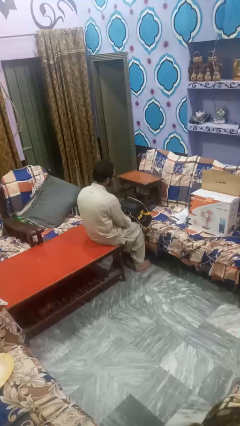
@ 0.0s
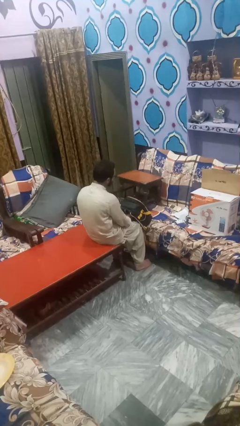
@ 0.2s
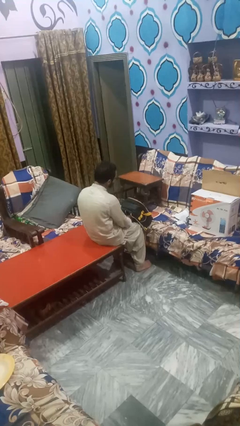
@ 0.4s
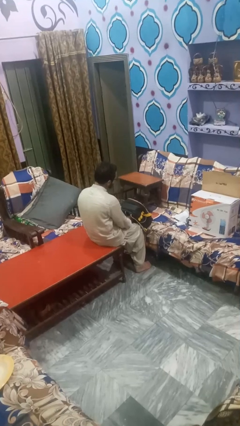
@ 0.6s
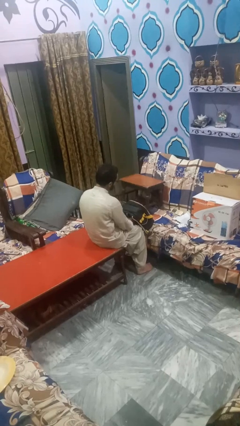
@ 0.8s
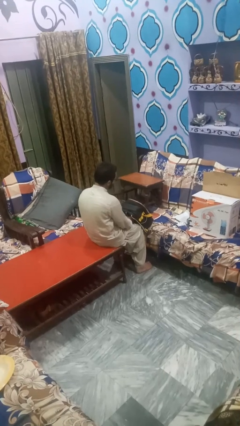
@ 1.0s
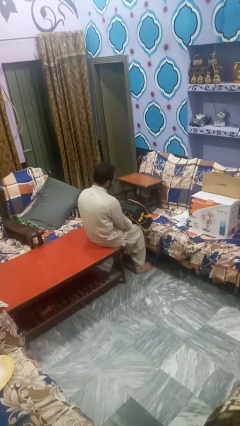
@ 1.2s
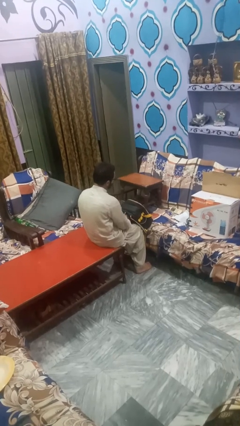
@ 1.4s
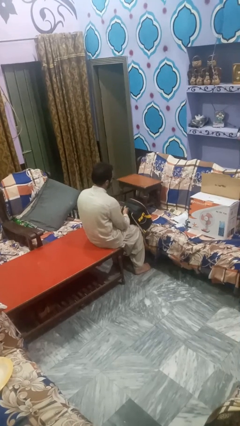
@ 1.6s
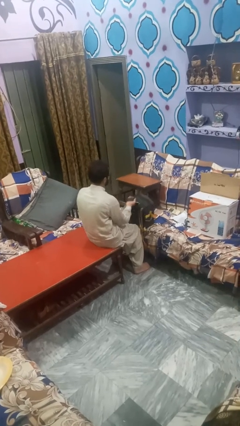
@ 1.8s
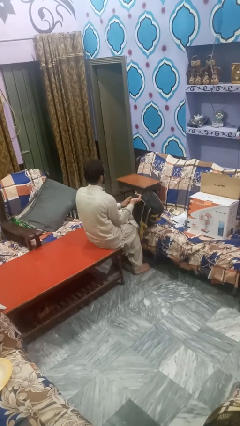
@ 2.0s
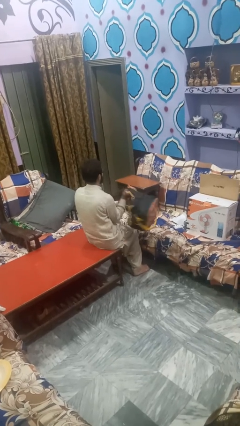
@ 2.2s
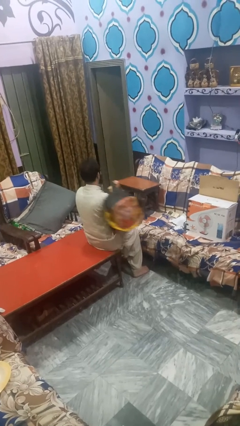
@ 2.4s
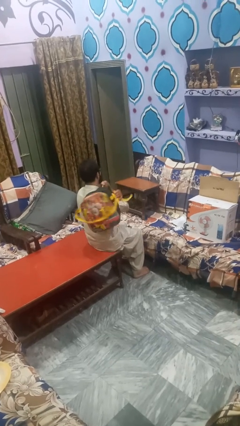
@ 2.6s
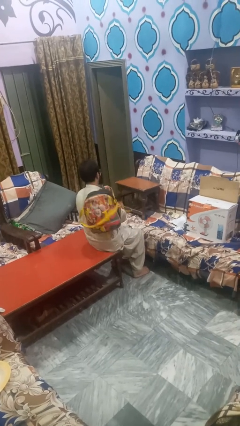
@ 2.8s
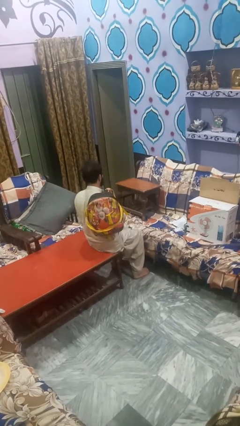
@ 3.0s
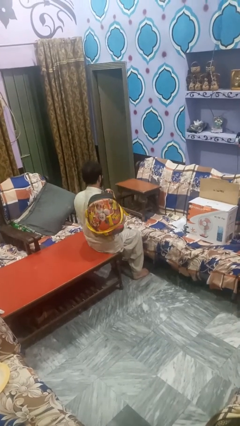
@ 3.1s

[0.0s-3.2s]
person puts on backpack

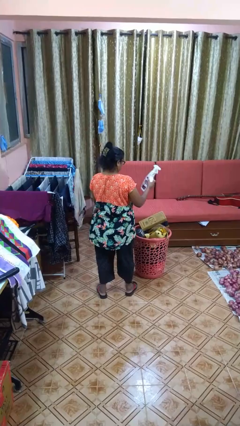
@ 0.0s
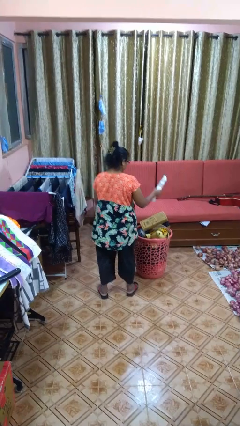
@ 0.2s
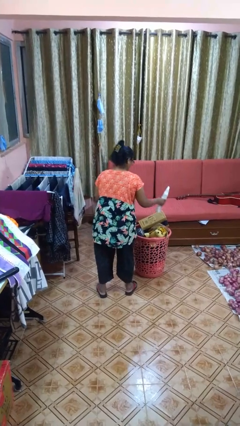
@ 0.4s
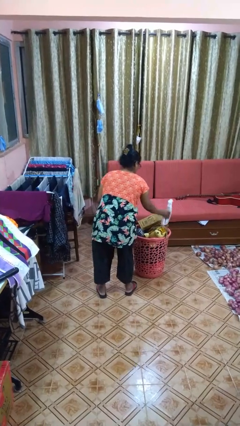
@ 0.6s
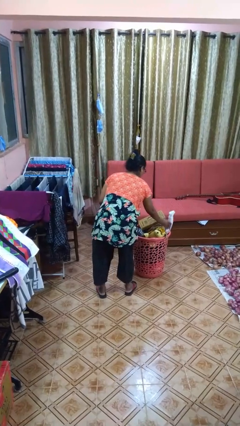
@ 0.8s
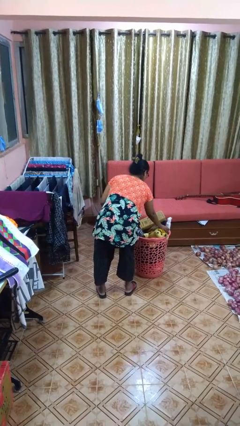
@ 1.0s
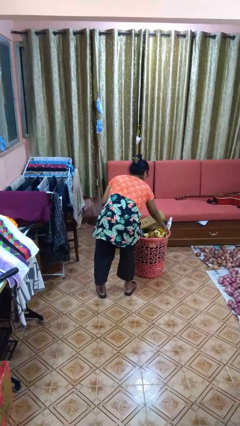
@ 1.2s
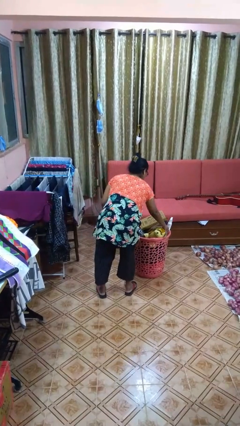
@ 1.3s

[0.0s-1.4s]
person puts object into basket

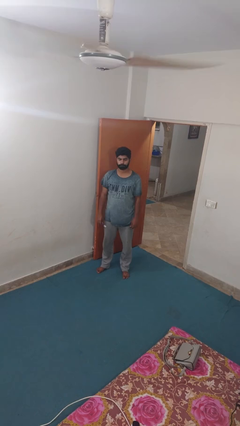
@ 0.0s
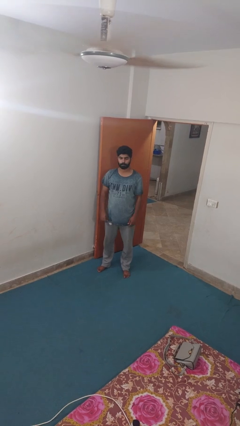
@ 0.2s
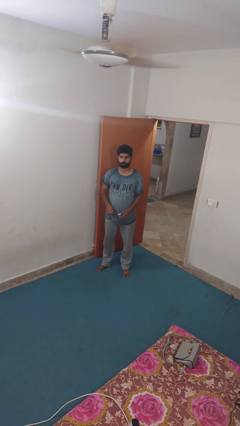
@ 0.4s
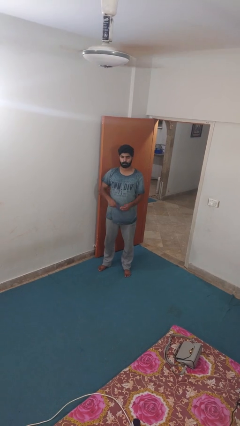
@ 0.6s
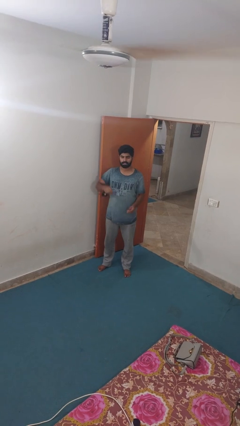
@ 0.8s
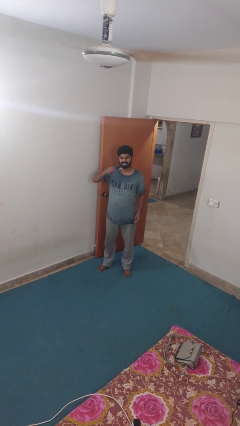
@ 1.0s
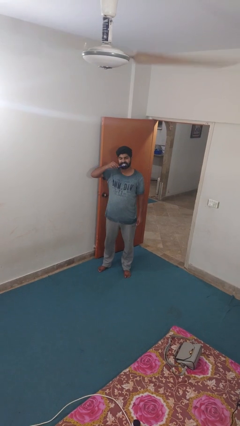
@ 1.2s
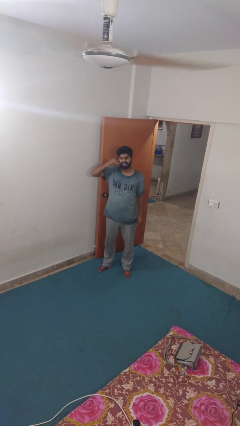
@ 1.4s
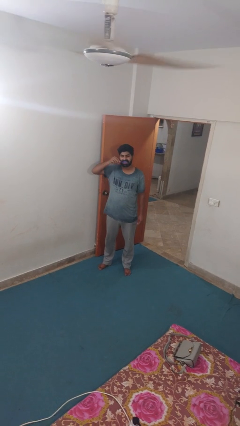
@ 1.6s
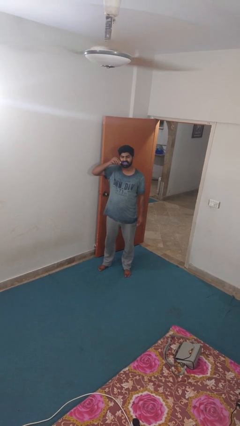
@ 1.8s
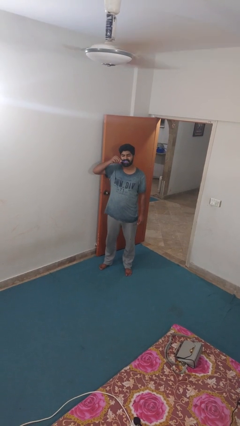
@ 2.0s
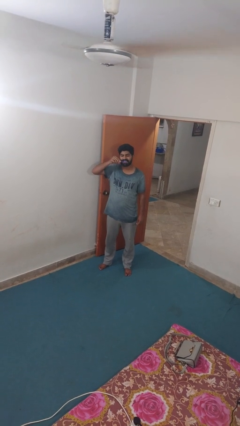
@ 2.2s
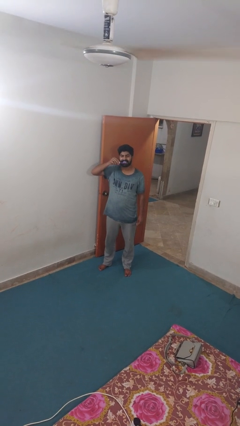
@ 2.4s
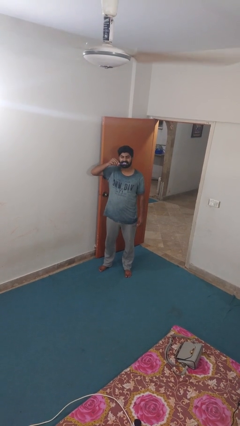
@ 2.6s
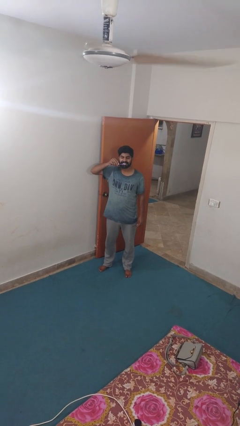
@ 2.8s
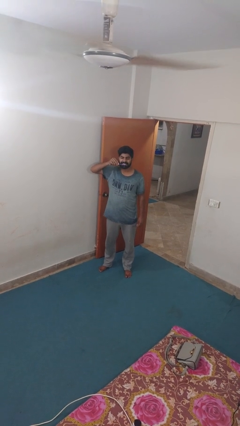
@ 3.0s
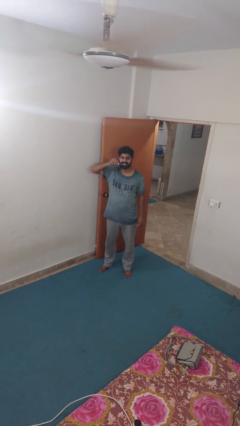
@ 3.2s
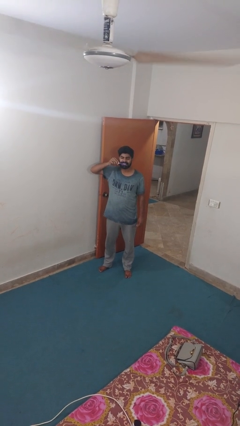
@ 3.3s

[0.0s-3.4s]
person brushes teeth

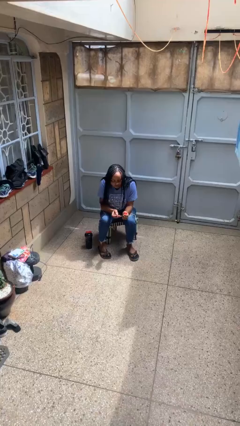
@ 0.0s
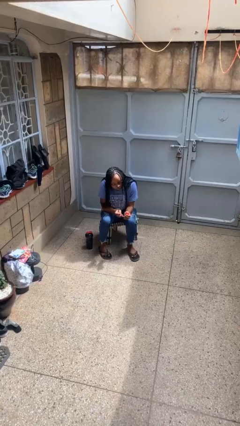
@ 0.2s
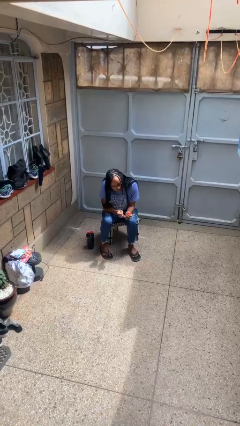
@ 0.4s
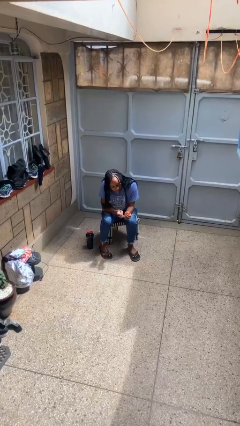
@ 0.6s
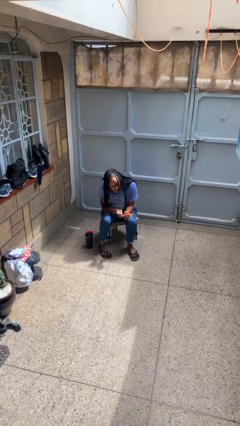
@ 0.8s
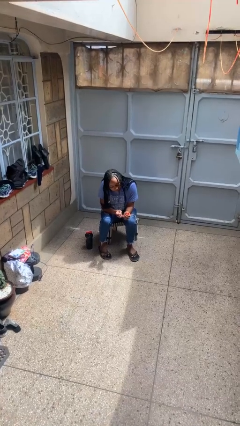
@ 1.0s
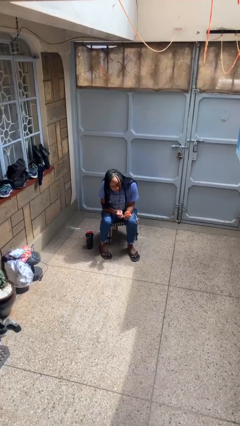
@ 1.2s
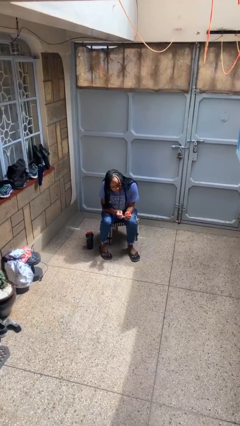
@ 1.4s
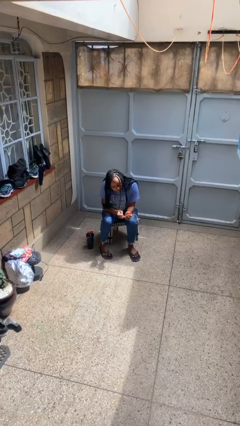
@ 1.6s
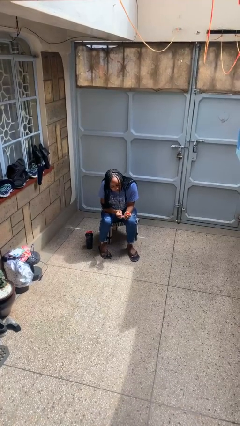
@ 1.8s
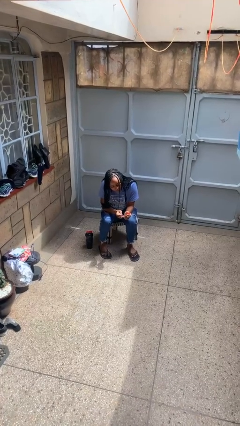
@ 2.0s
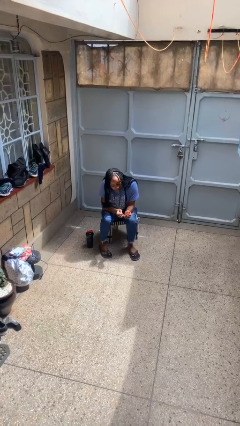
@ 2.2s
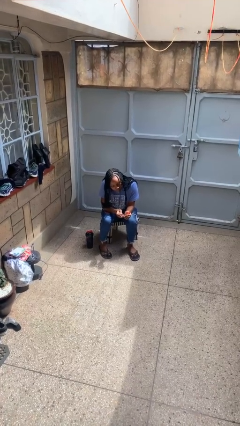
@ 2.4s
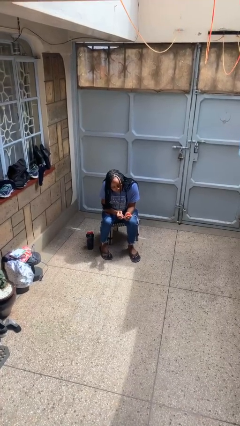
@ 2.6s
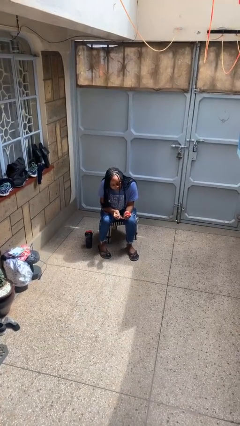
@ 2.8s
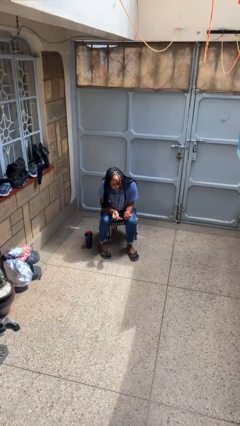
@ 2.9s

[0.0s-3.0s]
person paints fingernails

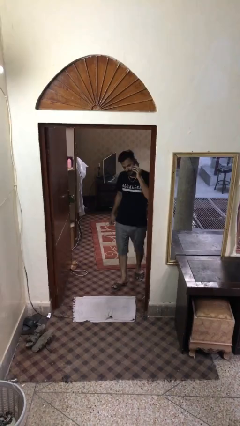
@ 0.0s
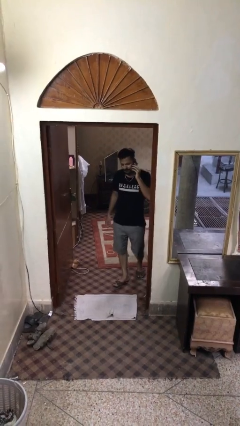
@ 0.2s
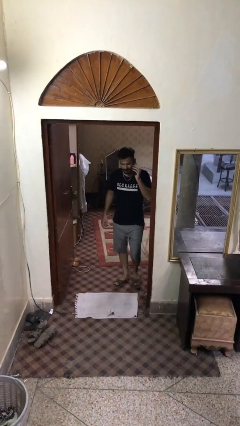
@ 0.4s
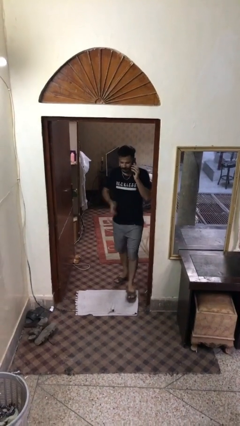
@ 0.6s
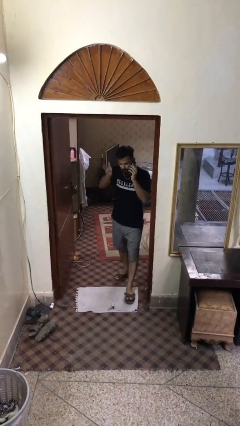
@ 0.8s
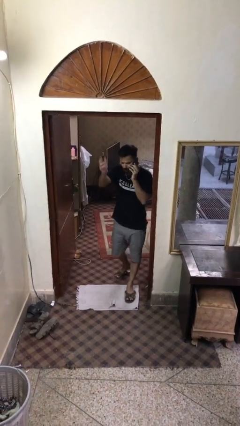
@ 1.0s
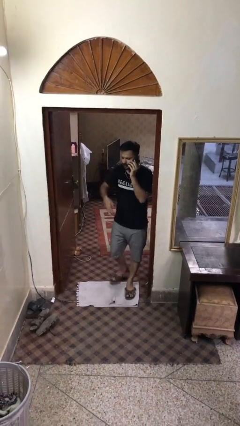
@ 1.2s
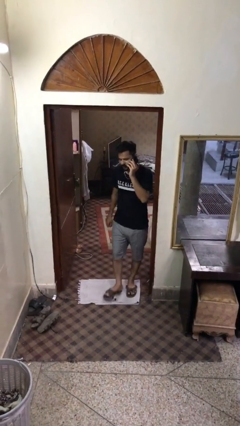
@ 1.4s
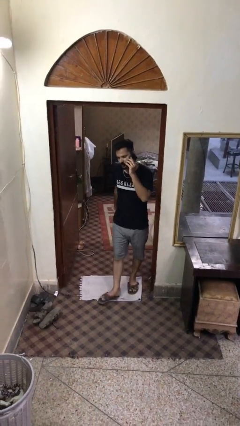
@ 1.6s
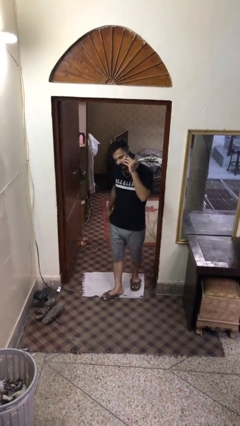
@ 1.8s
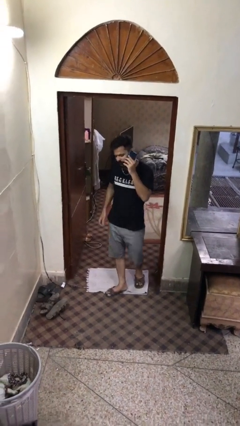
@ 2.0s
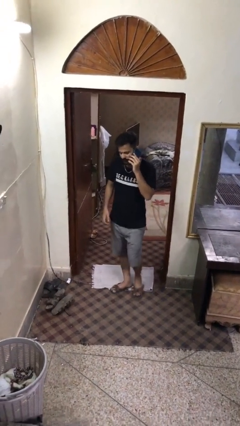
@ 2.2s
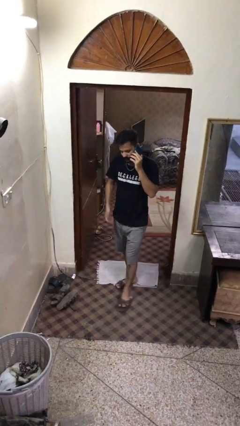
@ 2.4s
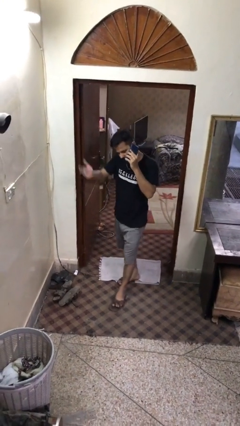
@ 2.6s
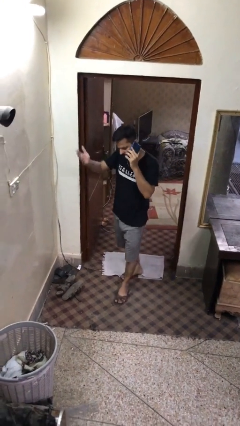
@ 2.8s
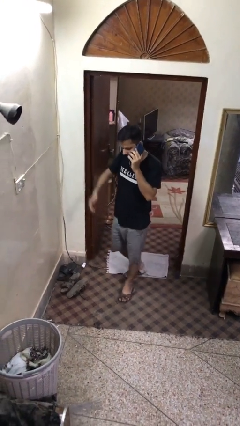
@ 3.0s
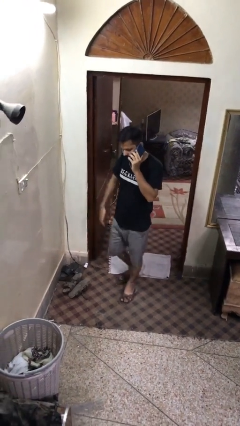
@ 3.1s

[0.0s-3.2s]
person enters scene through structure

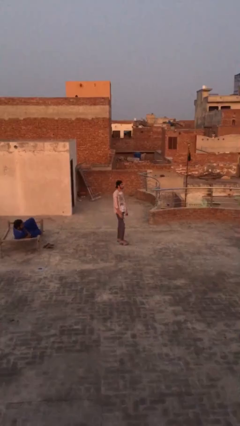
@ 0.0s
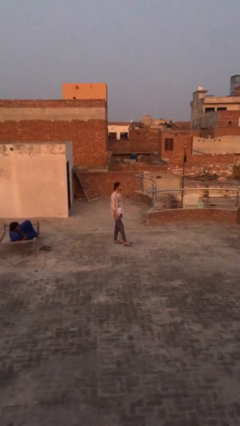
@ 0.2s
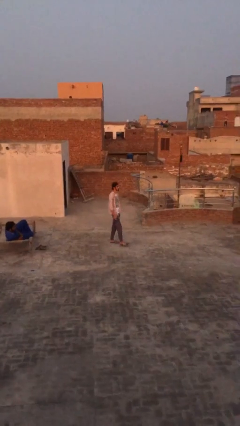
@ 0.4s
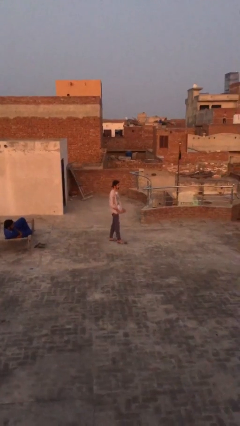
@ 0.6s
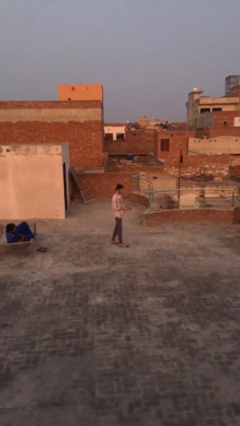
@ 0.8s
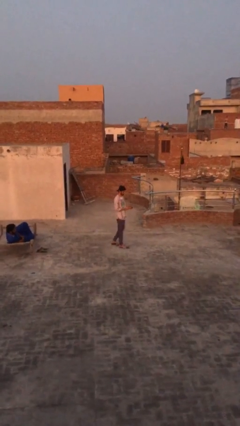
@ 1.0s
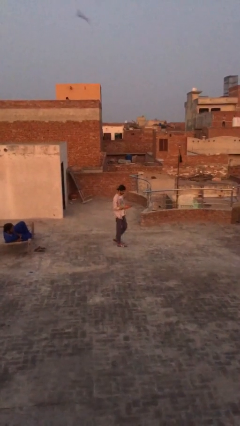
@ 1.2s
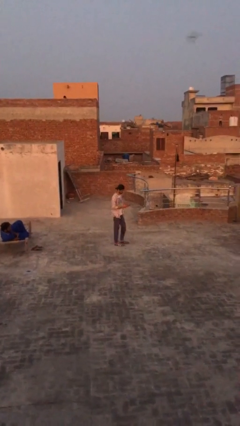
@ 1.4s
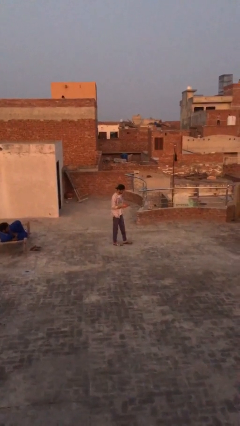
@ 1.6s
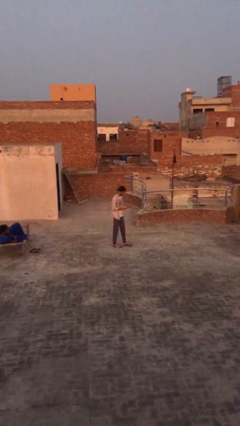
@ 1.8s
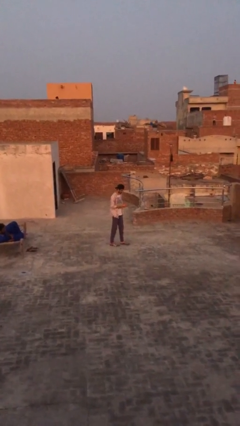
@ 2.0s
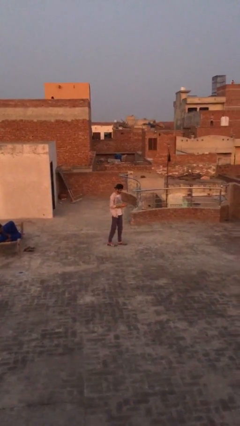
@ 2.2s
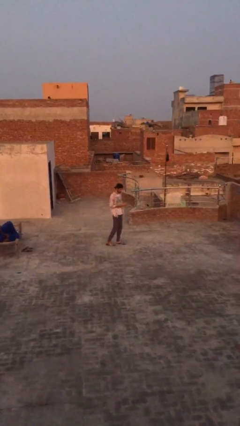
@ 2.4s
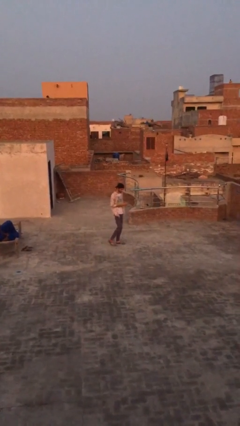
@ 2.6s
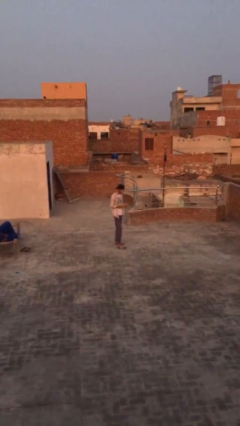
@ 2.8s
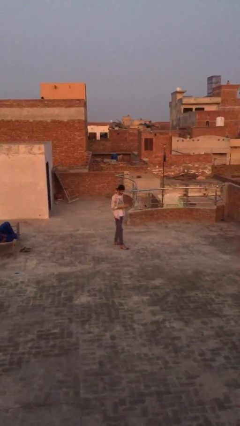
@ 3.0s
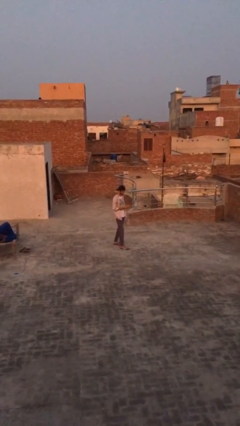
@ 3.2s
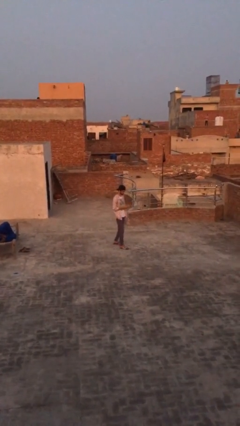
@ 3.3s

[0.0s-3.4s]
person texts on phone
